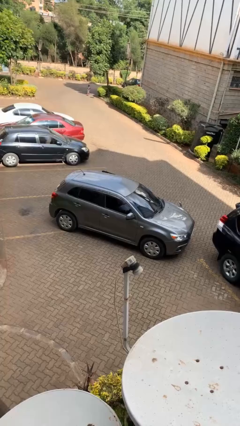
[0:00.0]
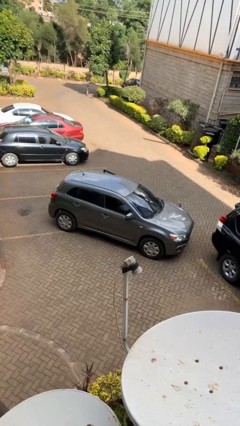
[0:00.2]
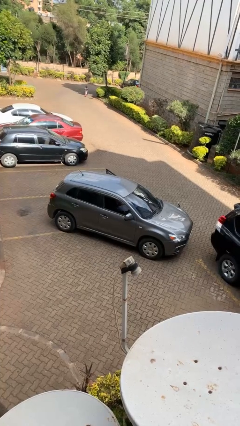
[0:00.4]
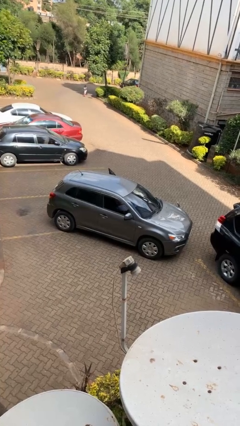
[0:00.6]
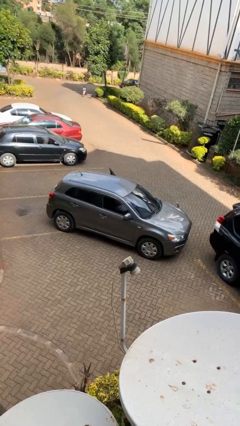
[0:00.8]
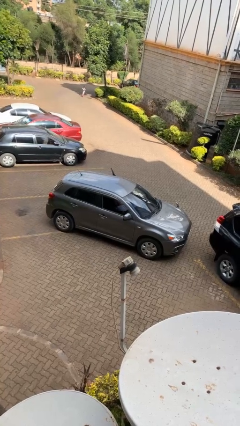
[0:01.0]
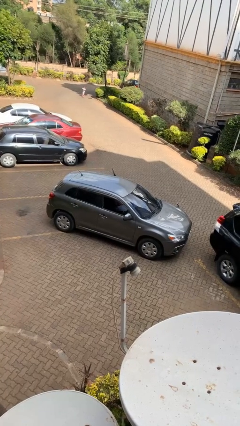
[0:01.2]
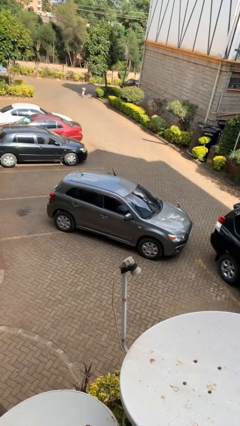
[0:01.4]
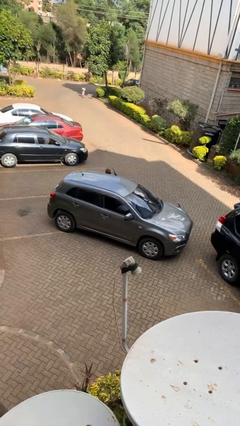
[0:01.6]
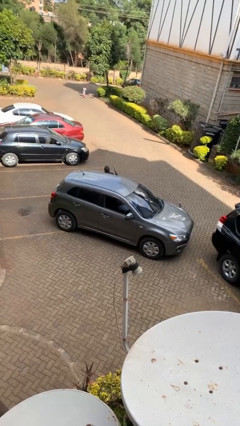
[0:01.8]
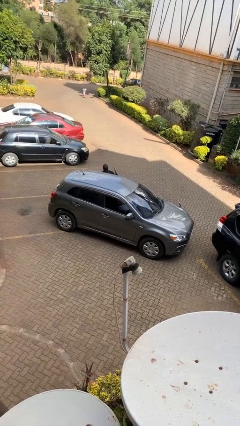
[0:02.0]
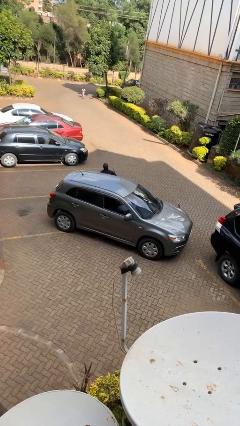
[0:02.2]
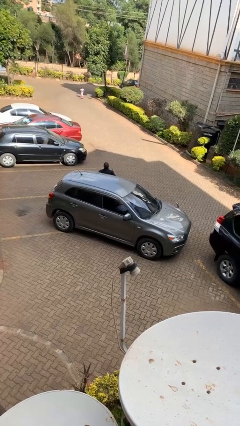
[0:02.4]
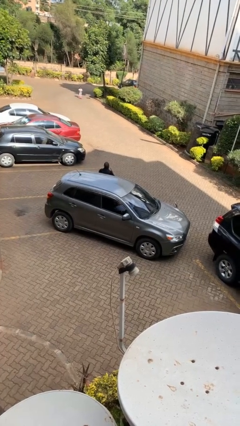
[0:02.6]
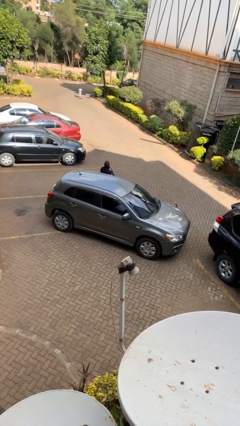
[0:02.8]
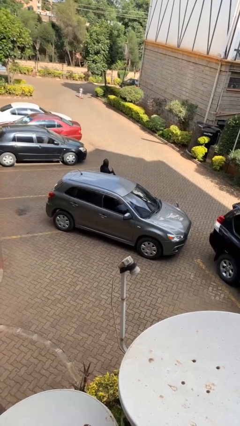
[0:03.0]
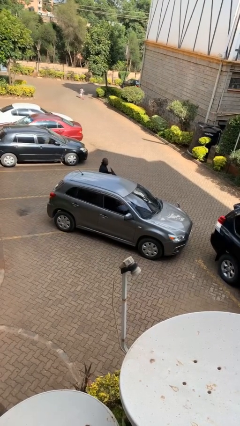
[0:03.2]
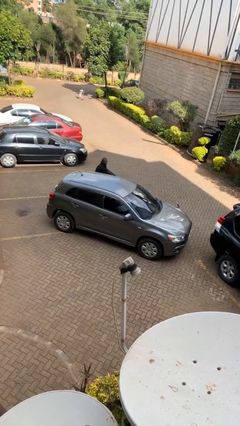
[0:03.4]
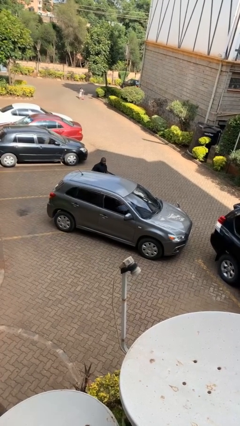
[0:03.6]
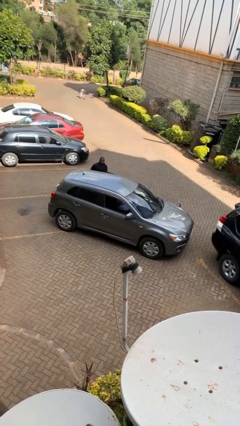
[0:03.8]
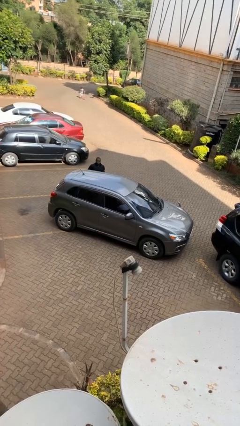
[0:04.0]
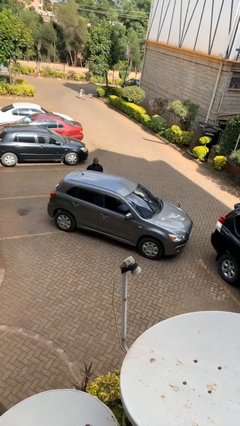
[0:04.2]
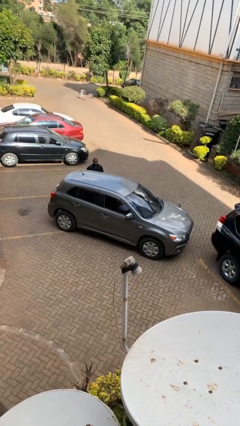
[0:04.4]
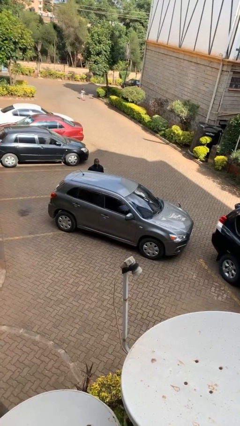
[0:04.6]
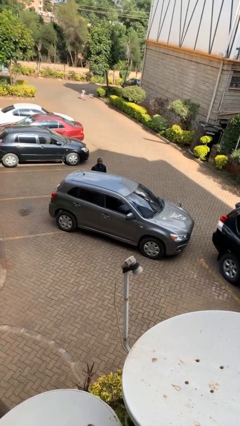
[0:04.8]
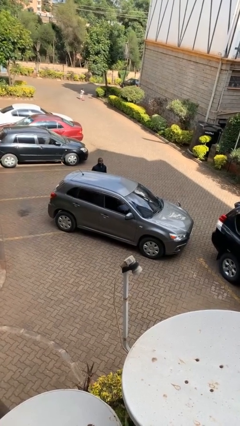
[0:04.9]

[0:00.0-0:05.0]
car drops off person

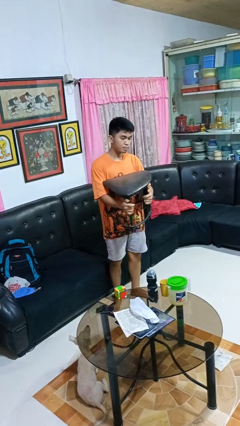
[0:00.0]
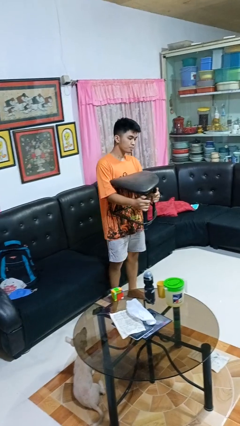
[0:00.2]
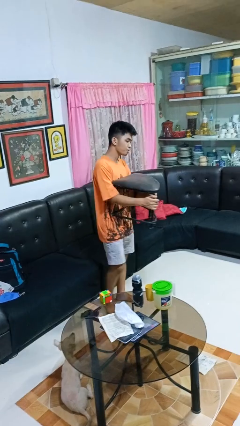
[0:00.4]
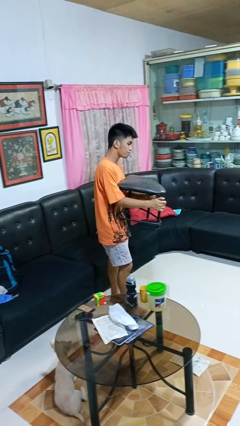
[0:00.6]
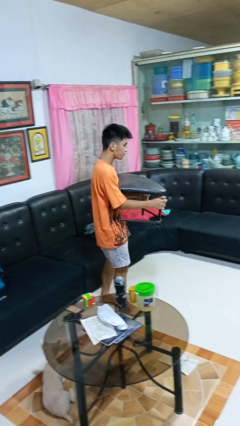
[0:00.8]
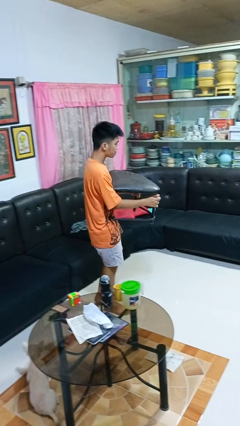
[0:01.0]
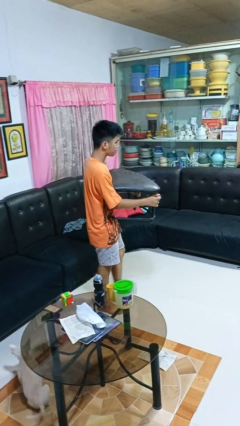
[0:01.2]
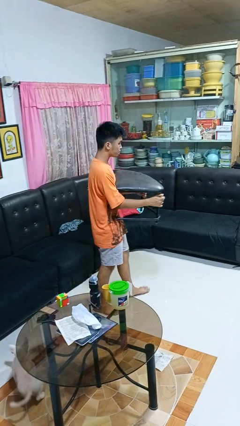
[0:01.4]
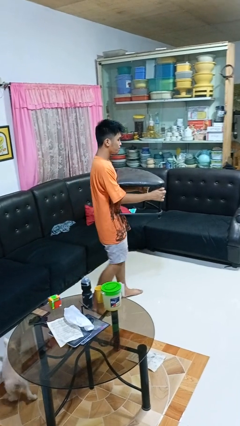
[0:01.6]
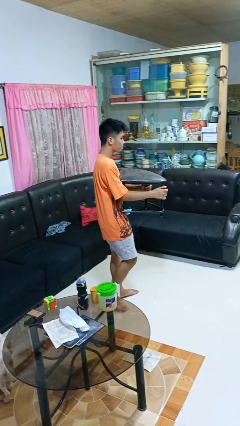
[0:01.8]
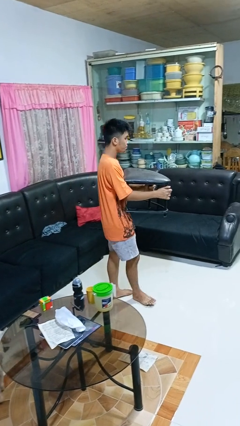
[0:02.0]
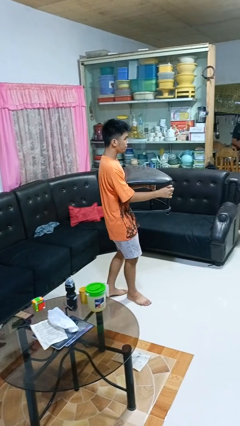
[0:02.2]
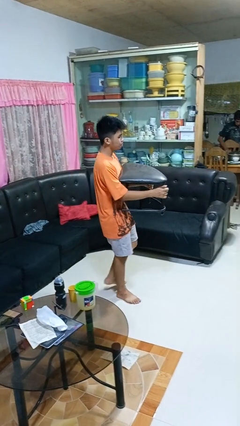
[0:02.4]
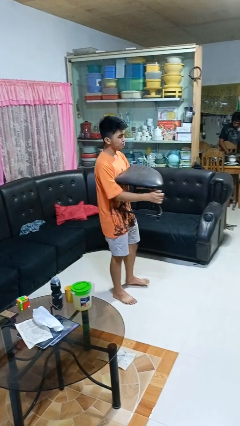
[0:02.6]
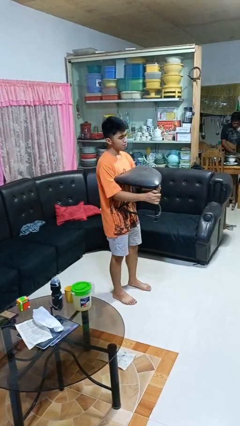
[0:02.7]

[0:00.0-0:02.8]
person carries furniture

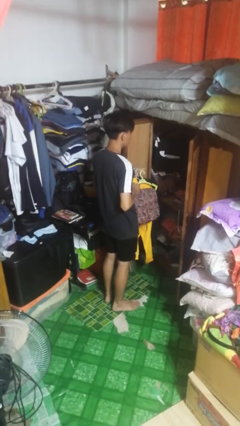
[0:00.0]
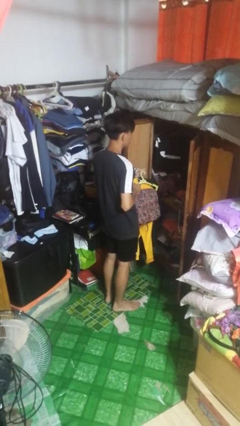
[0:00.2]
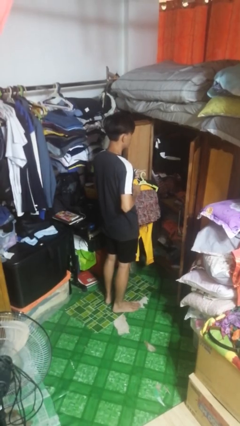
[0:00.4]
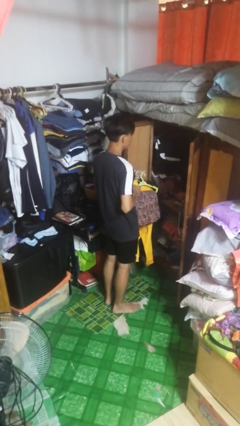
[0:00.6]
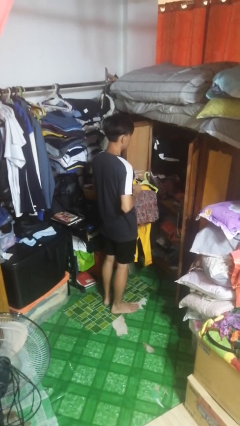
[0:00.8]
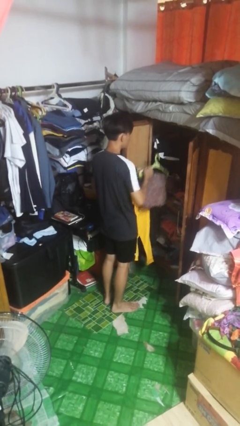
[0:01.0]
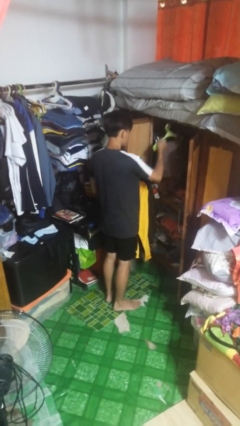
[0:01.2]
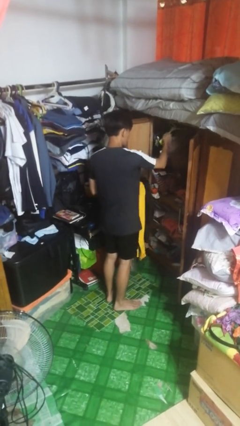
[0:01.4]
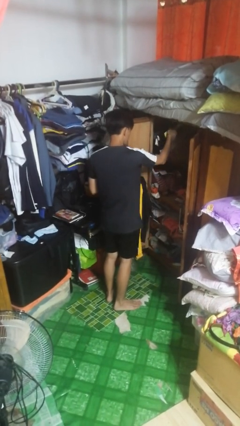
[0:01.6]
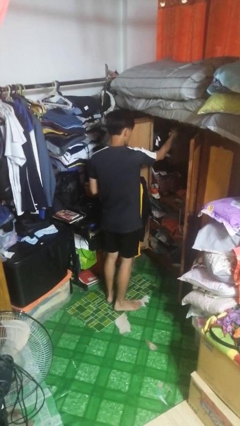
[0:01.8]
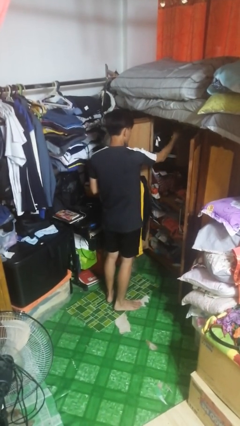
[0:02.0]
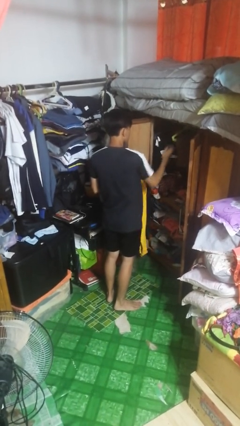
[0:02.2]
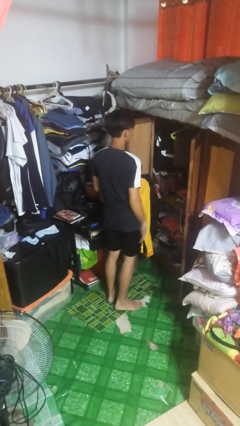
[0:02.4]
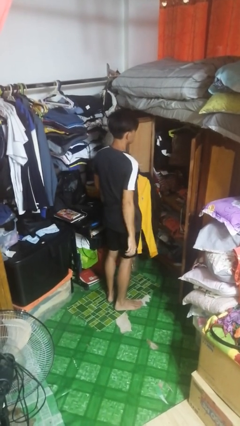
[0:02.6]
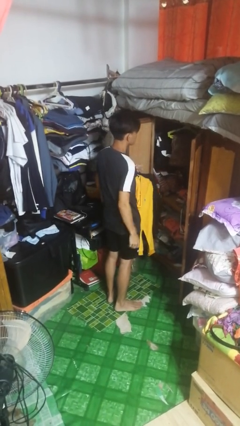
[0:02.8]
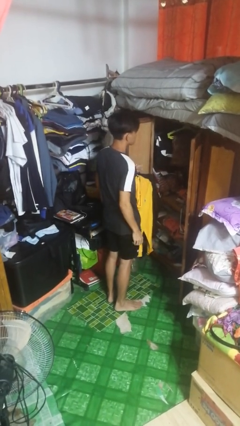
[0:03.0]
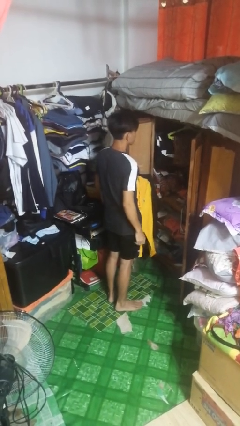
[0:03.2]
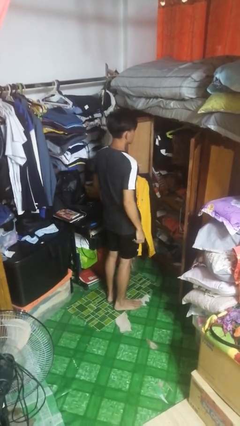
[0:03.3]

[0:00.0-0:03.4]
person puts clothes into closet

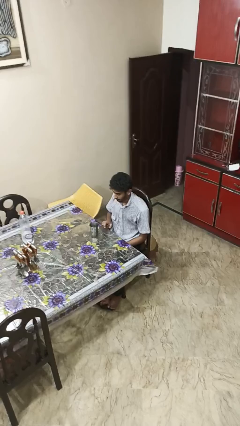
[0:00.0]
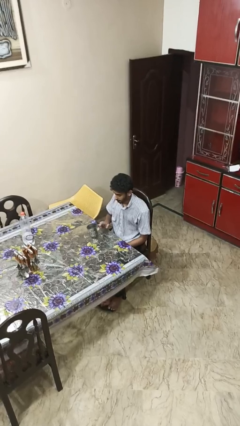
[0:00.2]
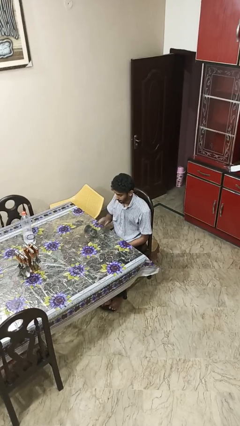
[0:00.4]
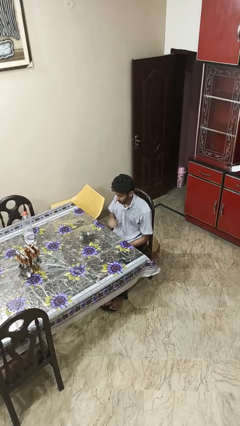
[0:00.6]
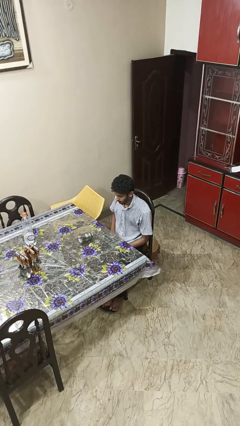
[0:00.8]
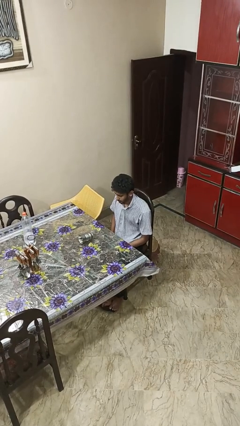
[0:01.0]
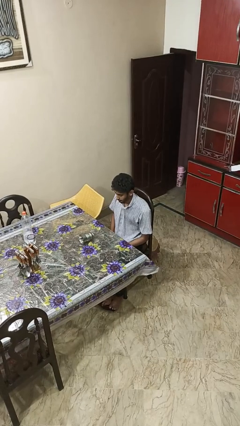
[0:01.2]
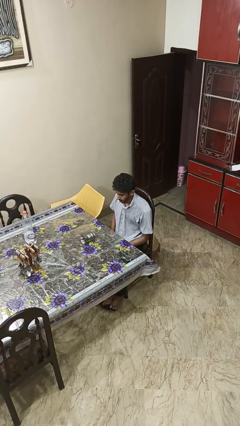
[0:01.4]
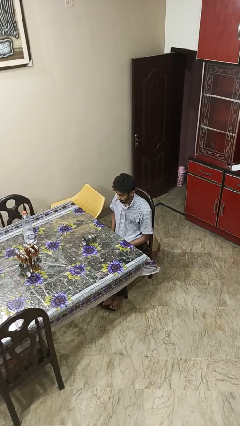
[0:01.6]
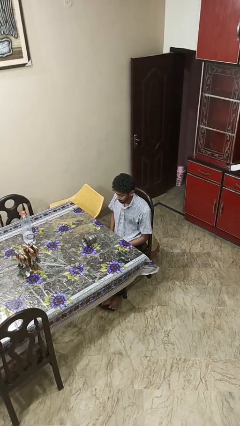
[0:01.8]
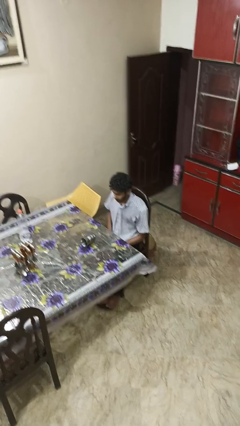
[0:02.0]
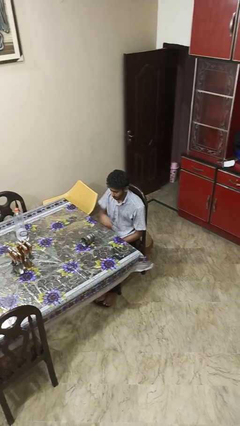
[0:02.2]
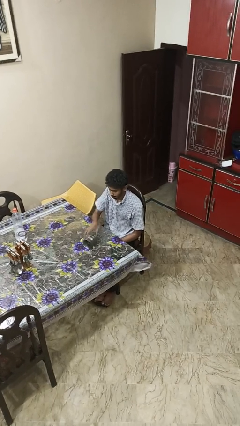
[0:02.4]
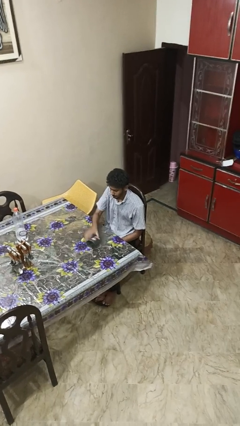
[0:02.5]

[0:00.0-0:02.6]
person knocks over glass

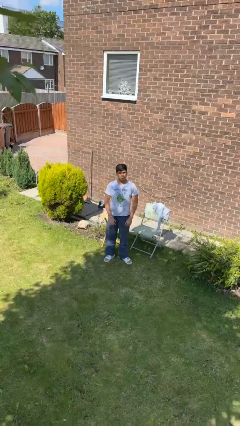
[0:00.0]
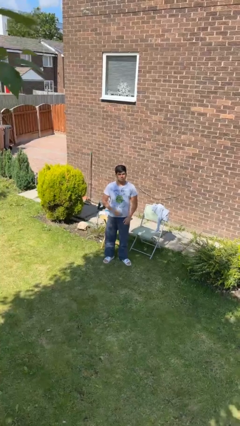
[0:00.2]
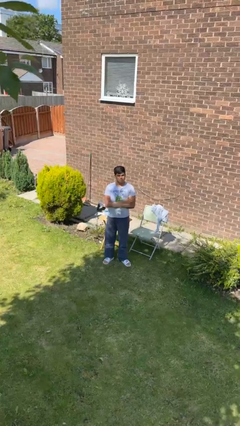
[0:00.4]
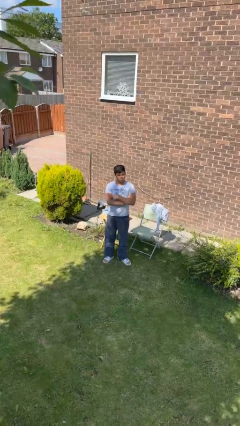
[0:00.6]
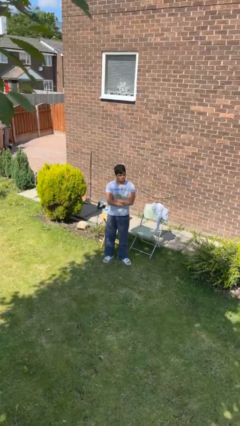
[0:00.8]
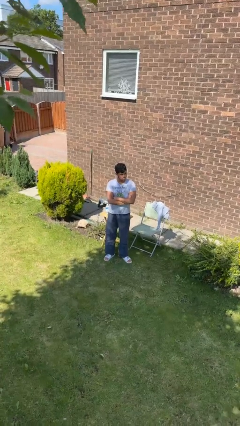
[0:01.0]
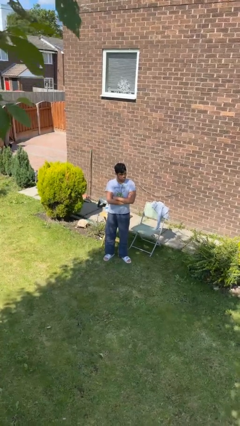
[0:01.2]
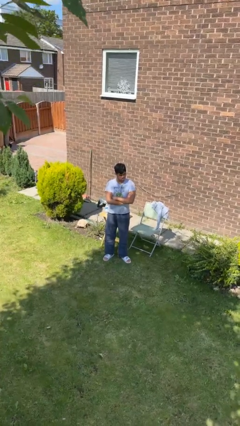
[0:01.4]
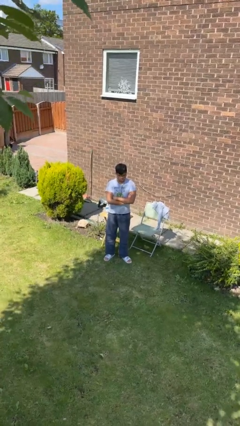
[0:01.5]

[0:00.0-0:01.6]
person crosses arms

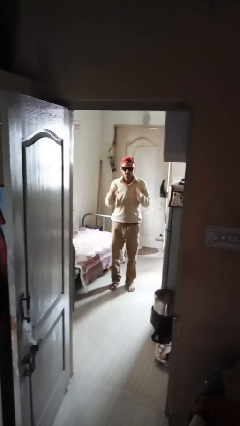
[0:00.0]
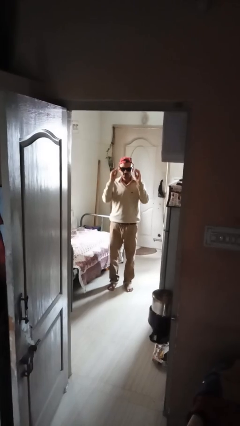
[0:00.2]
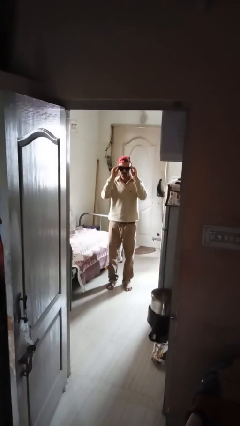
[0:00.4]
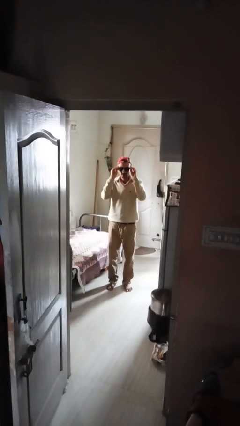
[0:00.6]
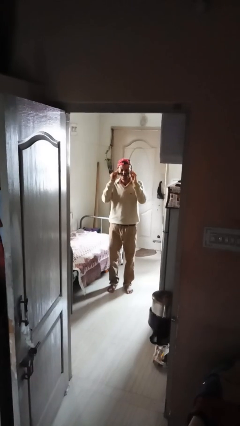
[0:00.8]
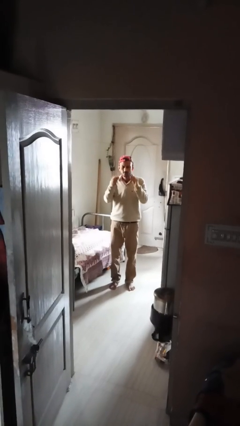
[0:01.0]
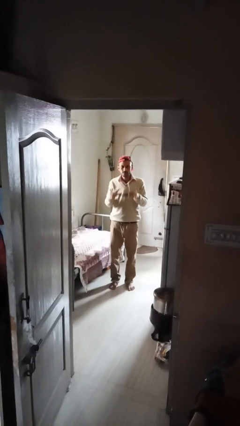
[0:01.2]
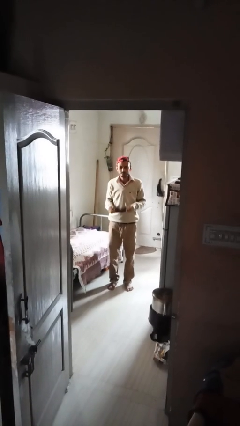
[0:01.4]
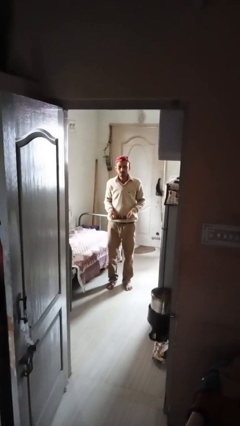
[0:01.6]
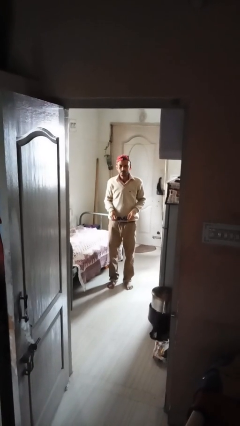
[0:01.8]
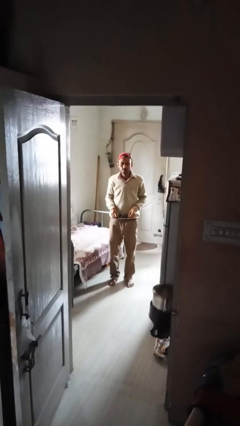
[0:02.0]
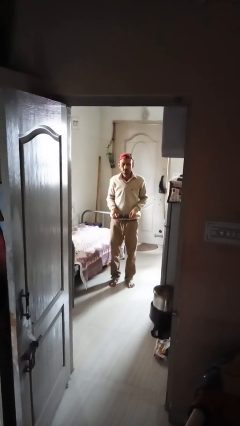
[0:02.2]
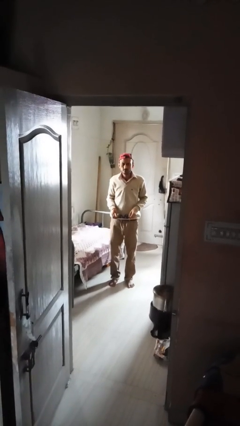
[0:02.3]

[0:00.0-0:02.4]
person takes off sunglasses
